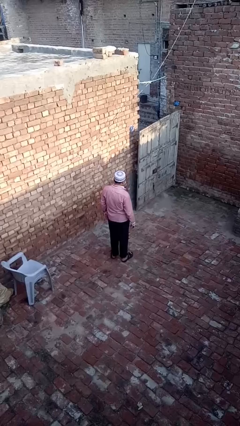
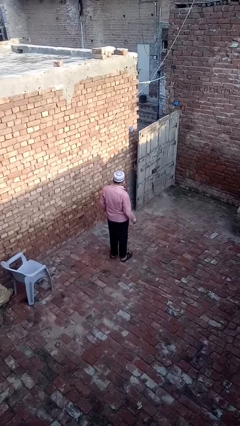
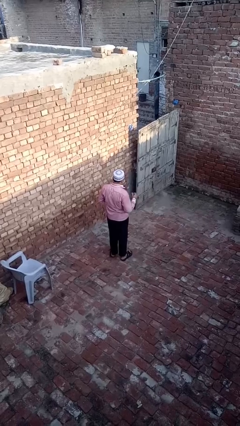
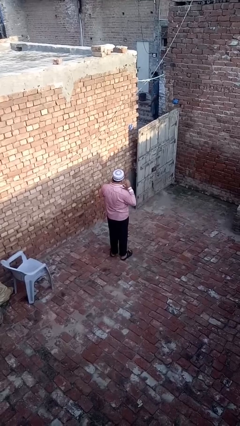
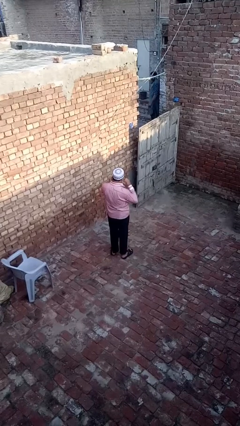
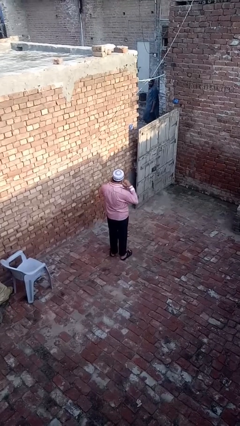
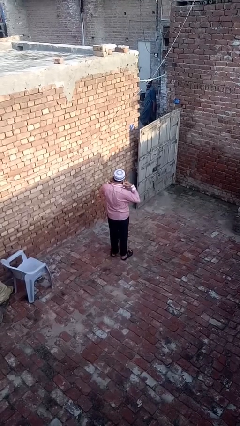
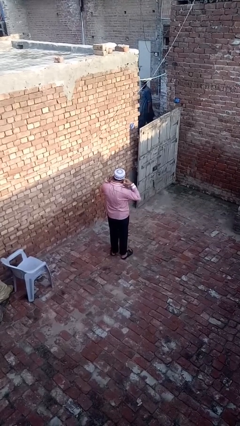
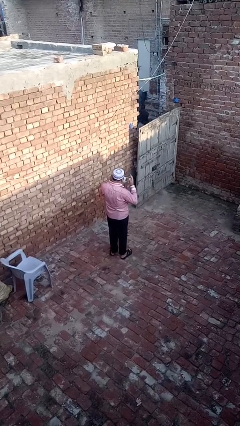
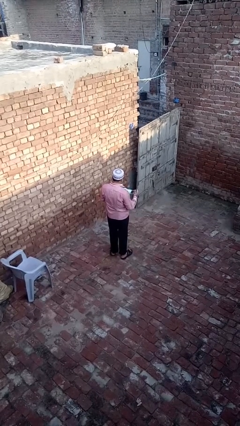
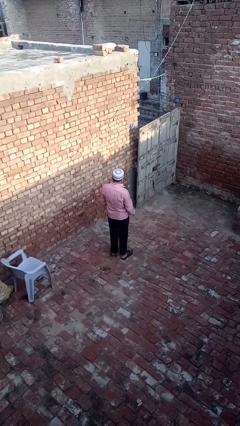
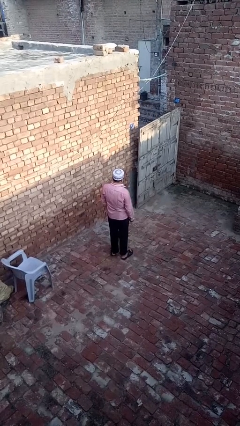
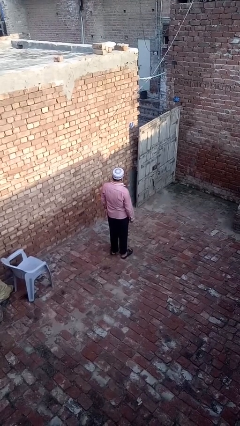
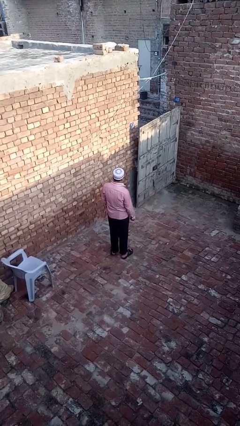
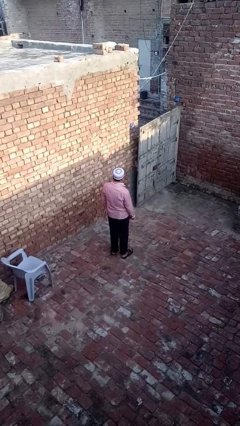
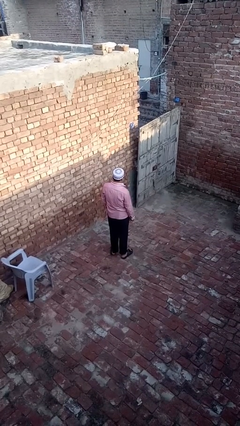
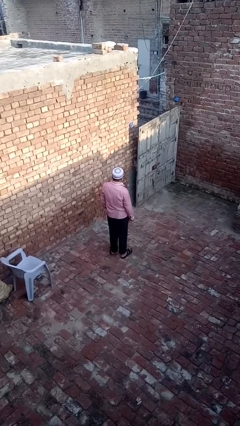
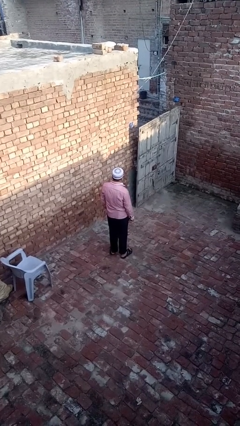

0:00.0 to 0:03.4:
person takes off facemask

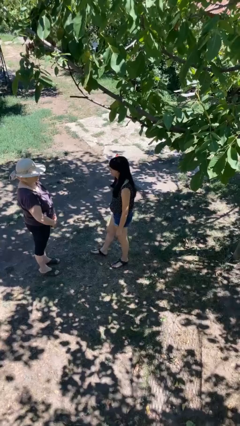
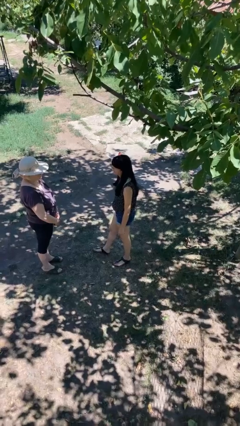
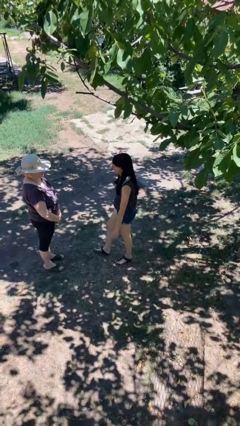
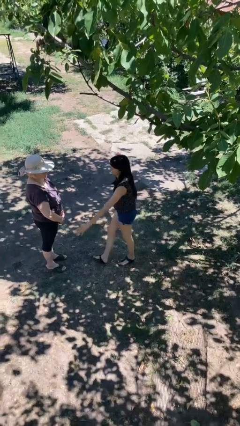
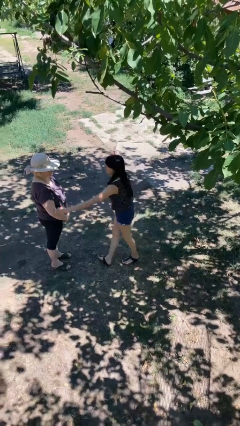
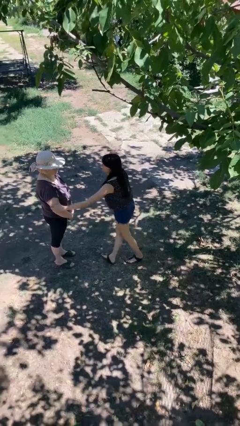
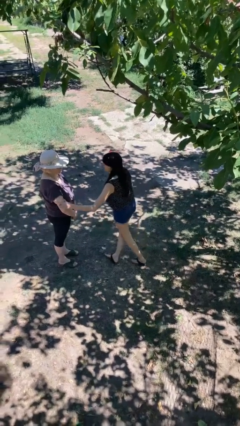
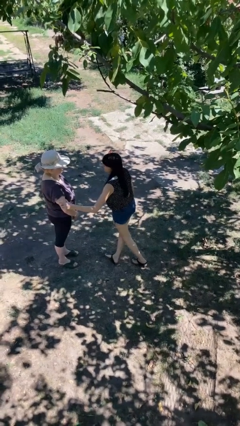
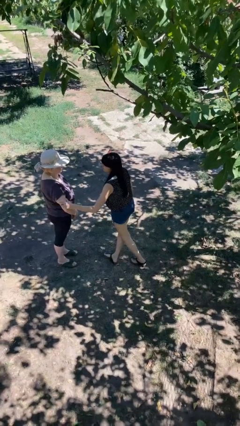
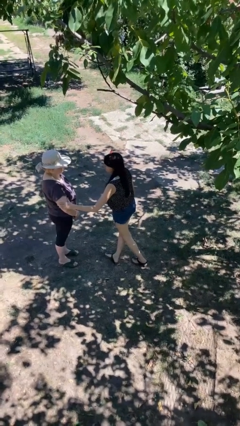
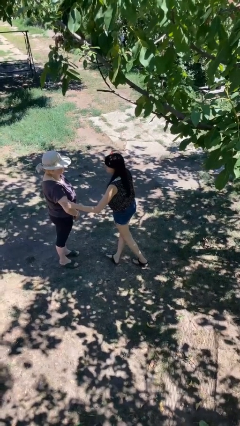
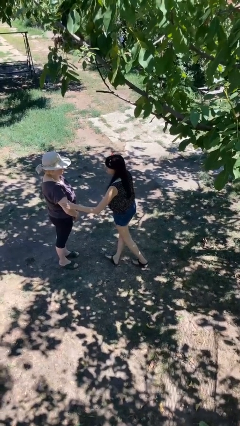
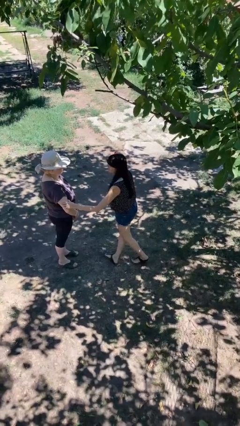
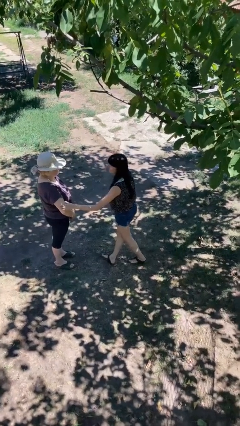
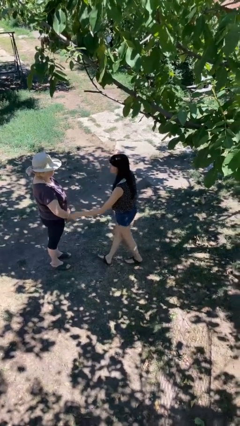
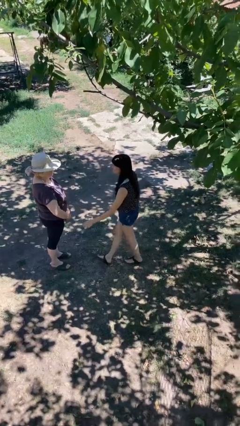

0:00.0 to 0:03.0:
person grabs person by bicep

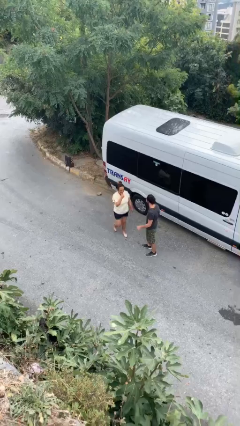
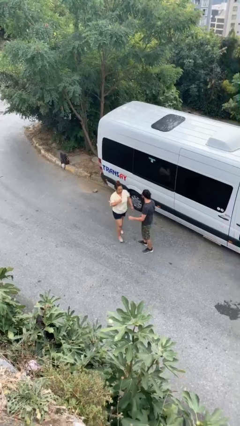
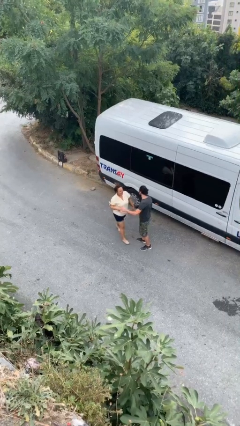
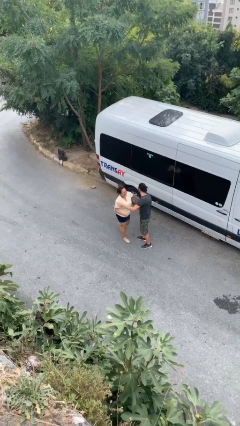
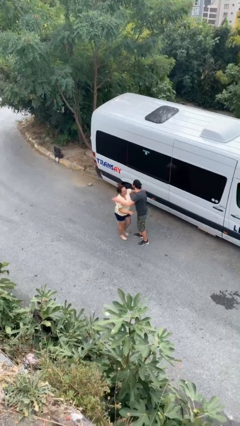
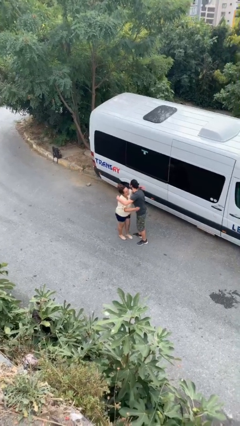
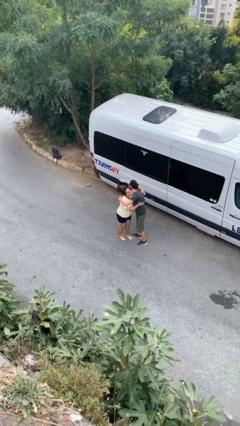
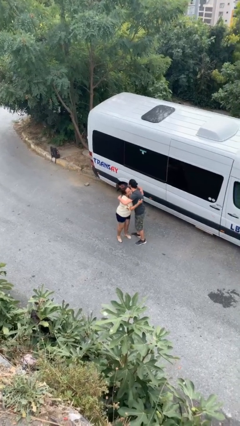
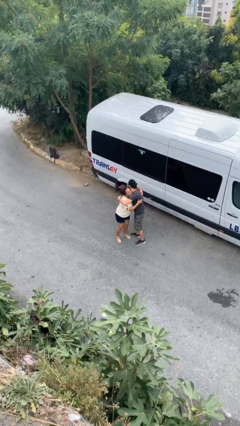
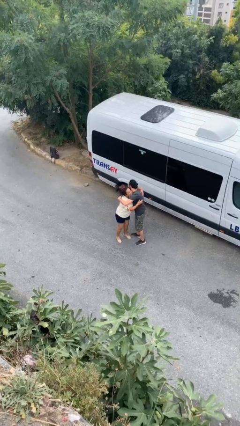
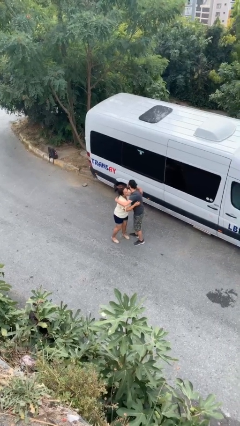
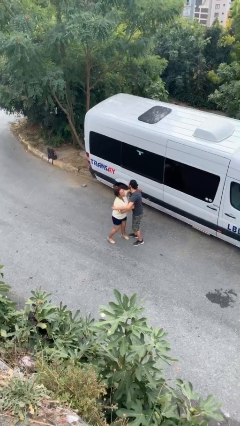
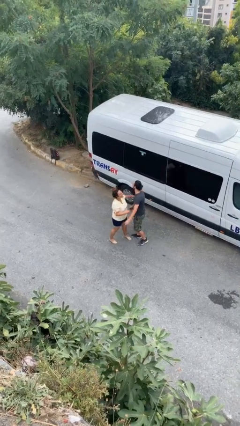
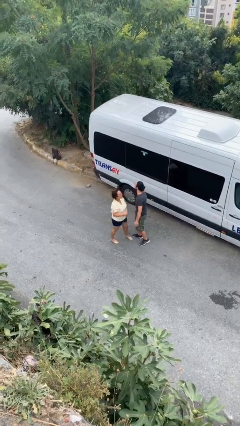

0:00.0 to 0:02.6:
person embraces person

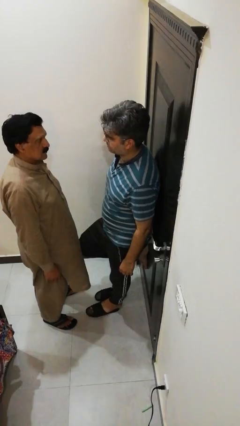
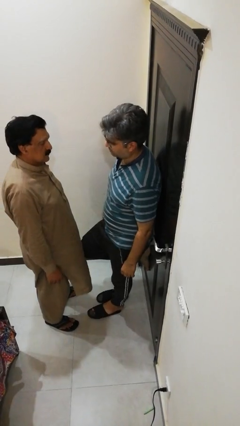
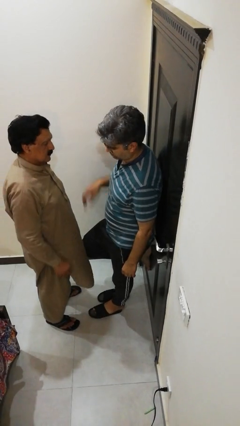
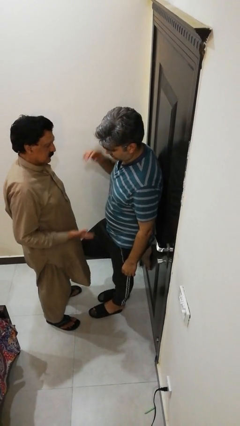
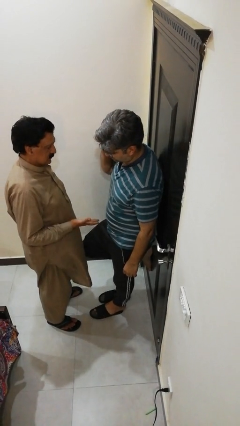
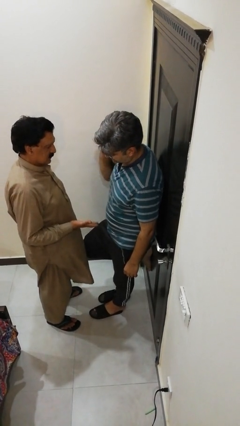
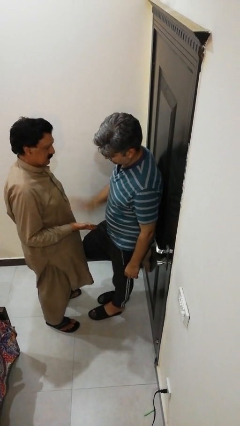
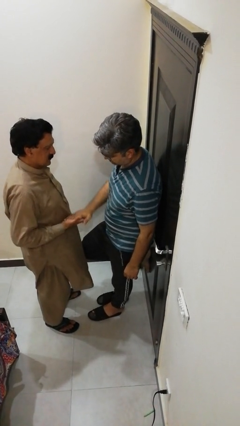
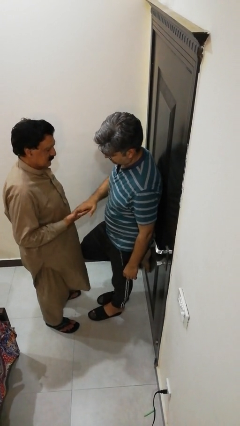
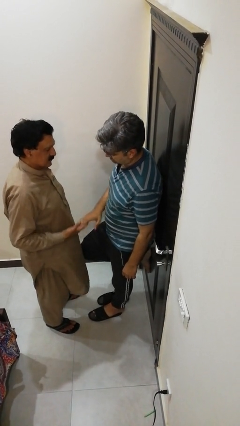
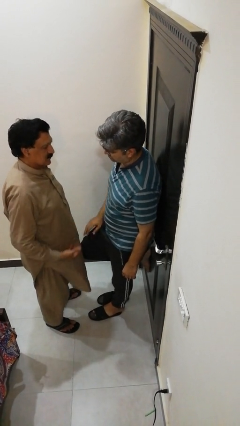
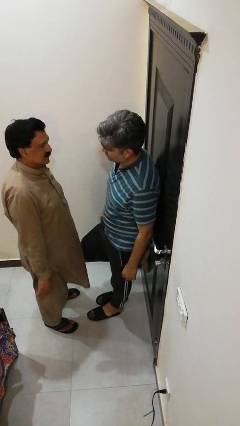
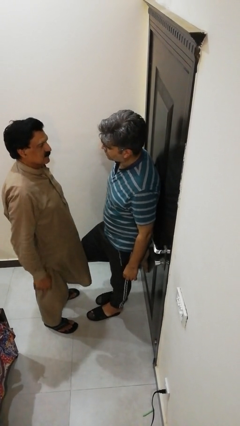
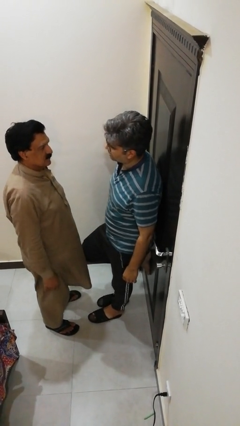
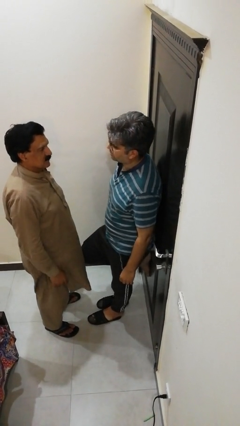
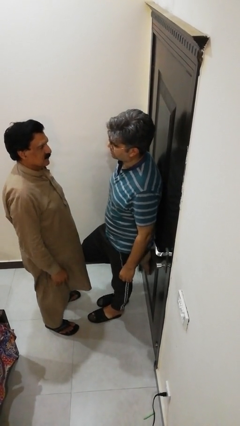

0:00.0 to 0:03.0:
person highfives hand

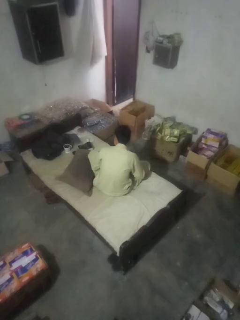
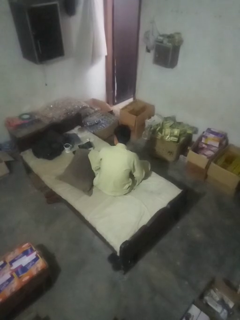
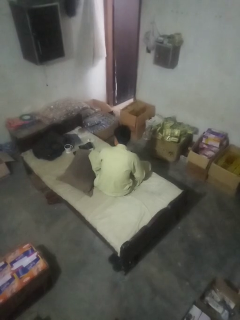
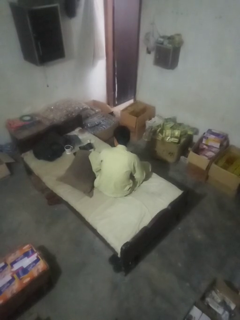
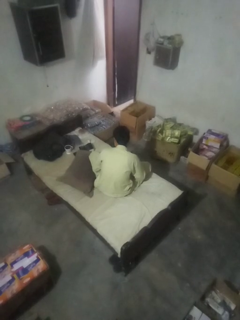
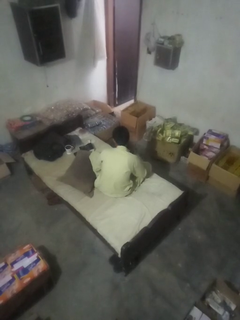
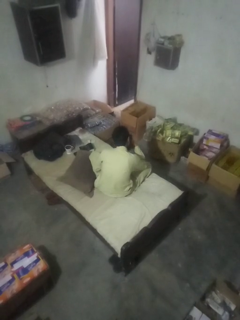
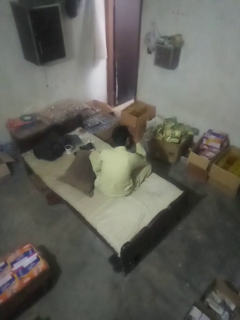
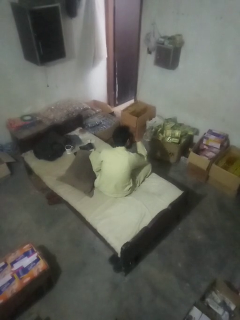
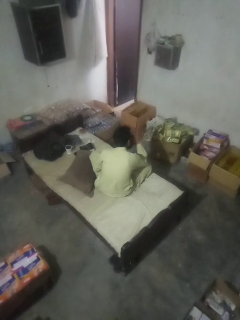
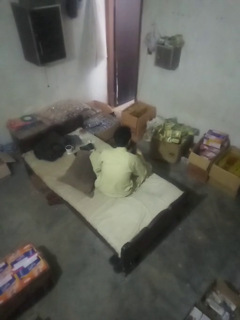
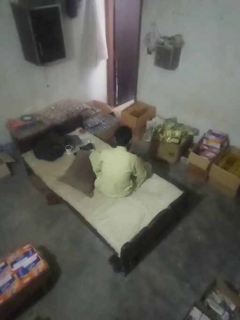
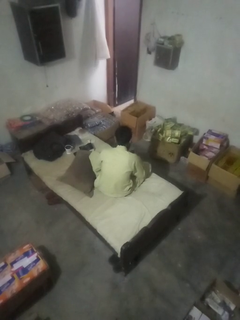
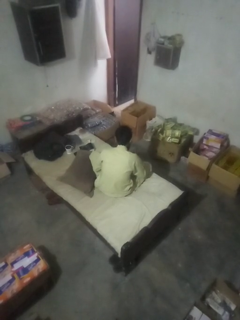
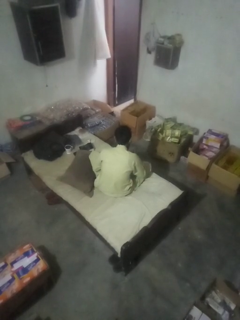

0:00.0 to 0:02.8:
person blows nose

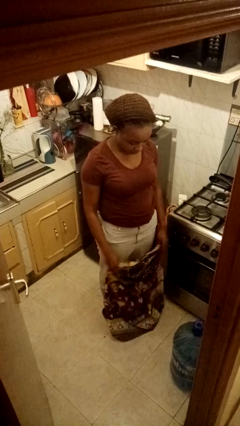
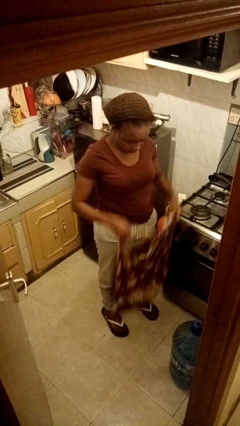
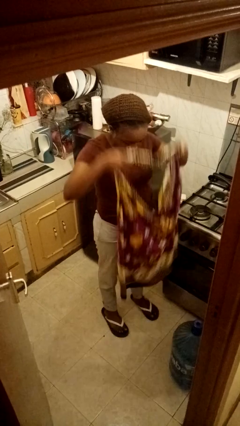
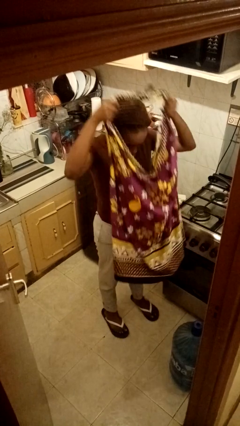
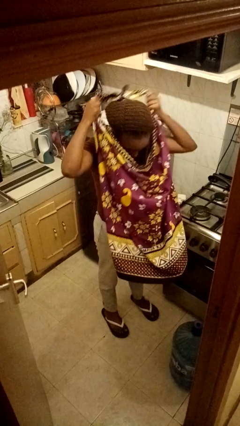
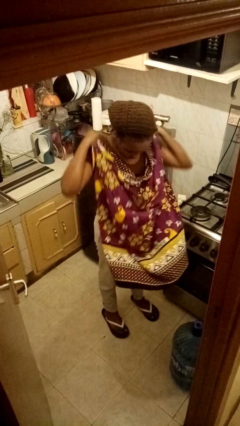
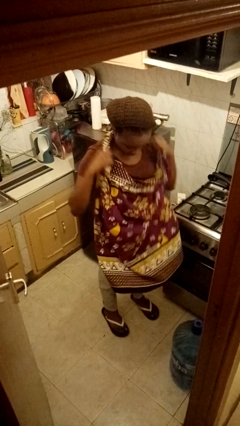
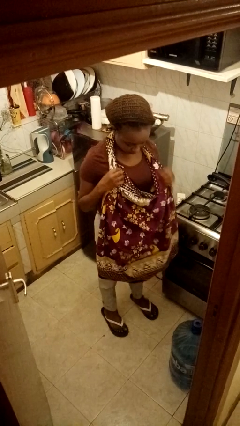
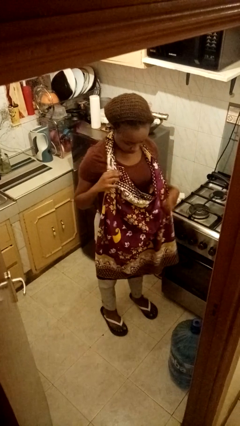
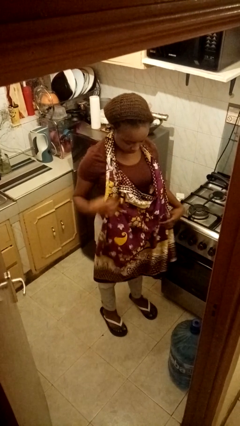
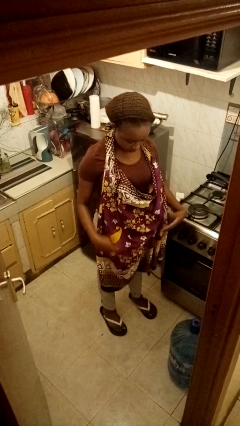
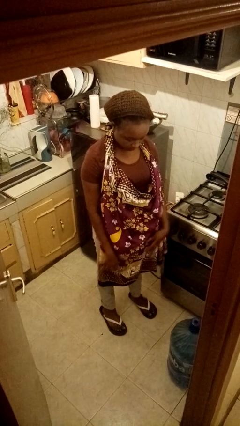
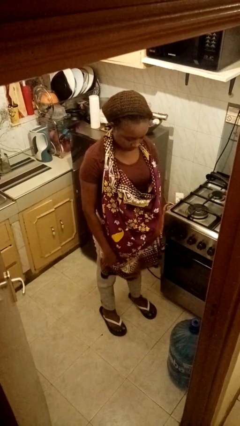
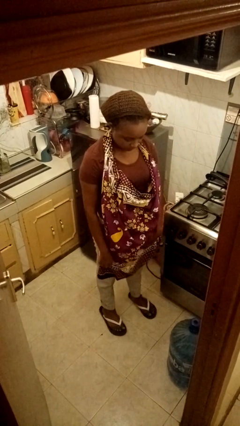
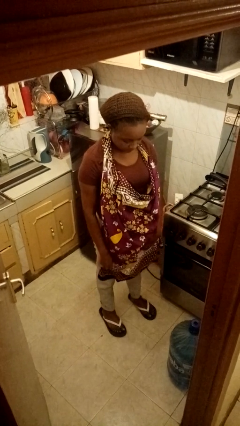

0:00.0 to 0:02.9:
person puts on apron

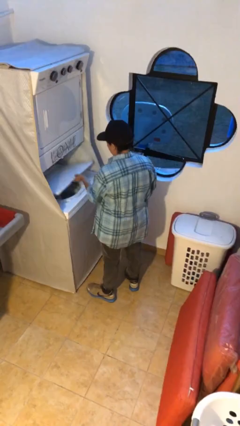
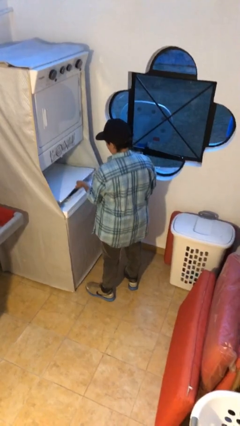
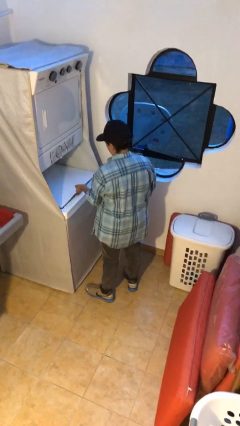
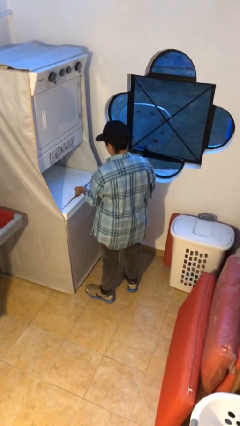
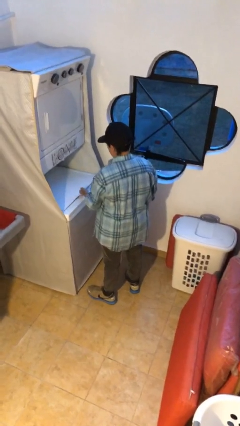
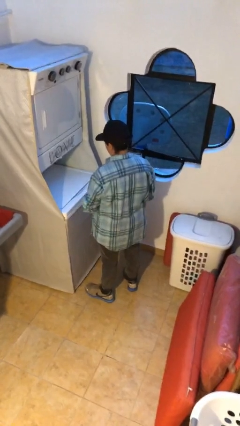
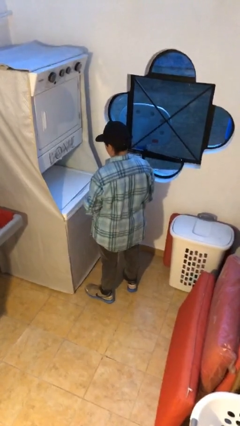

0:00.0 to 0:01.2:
person closes clothes washer
